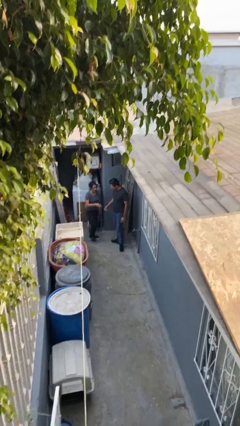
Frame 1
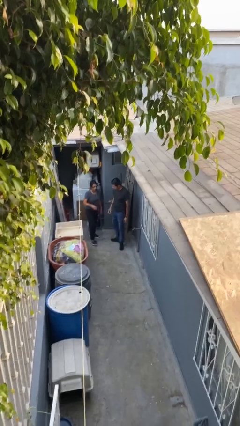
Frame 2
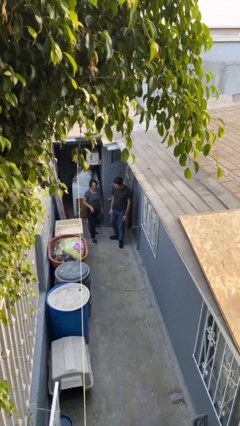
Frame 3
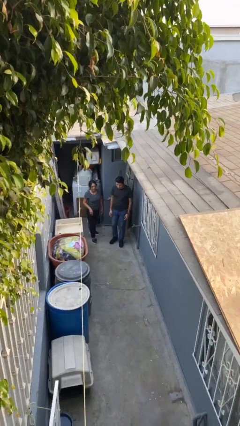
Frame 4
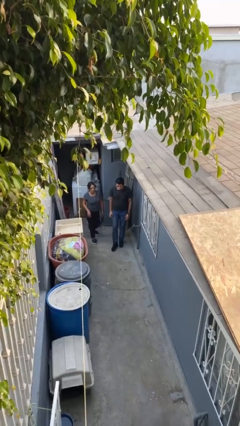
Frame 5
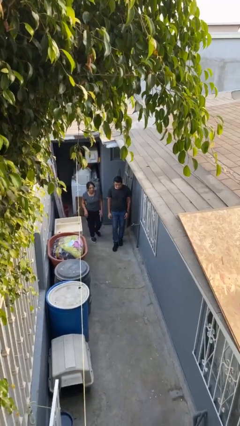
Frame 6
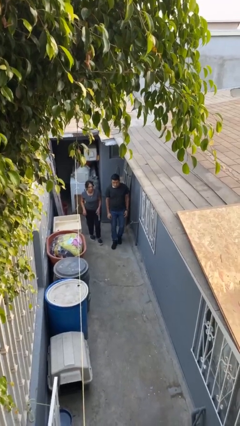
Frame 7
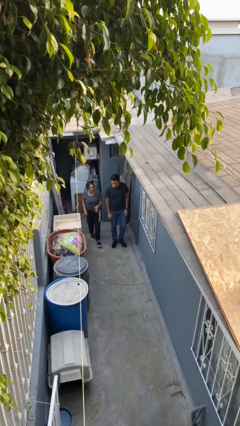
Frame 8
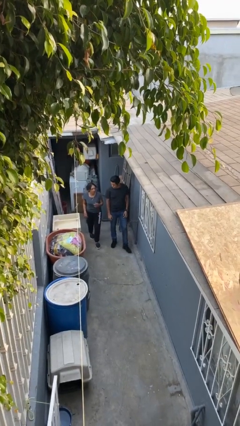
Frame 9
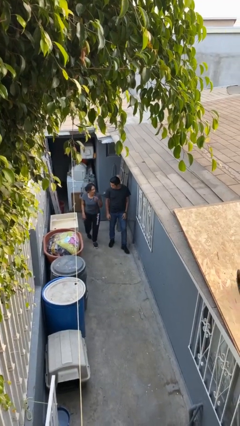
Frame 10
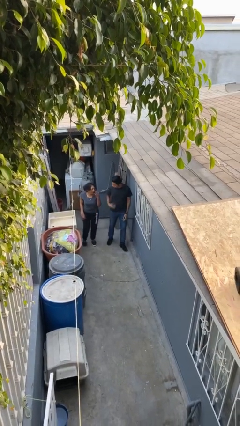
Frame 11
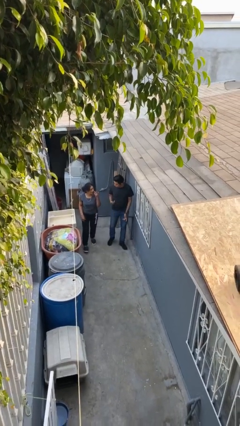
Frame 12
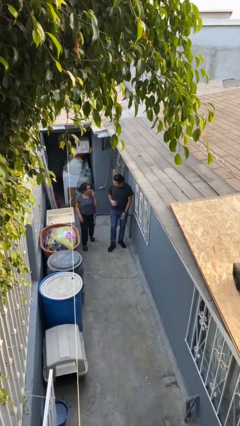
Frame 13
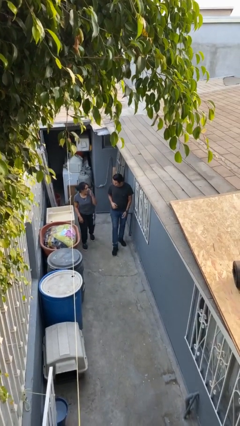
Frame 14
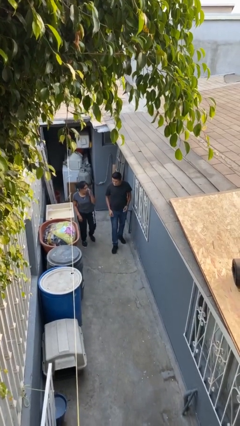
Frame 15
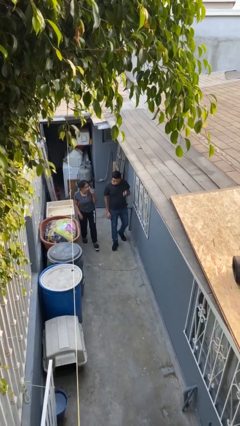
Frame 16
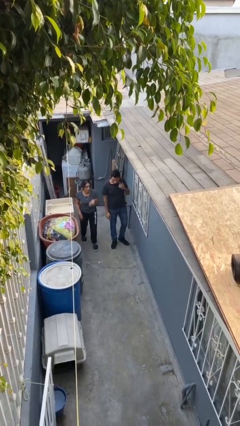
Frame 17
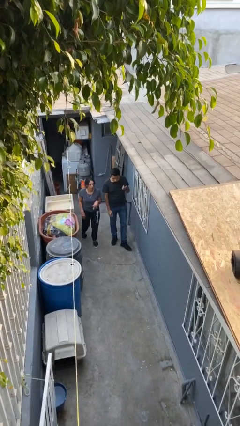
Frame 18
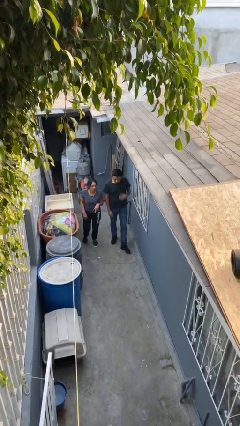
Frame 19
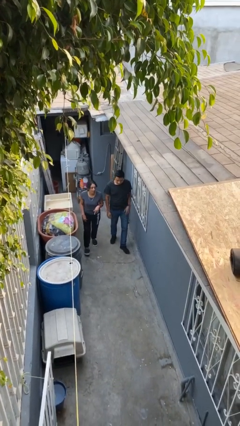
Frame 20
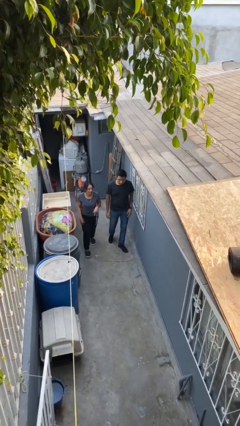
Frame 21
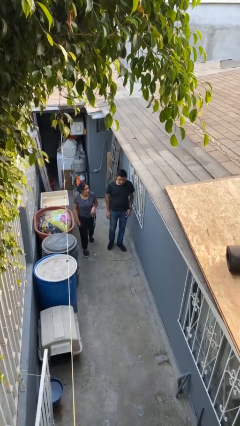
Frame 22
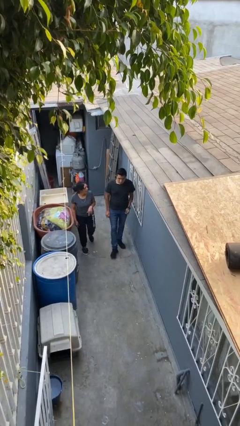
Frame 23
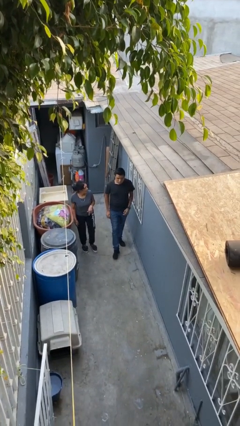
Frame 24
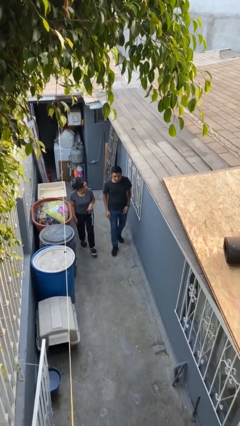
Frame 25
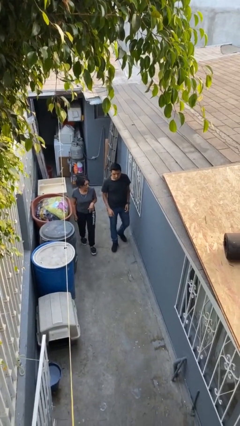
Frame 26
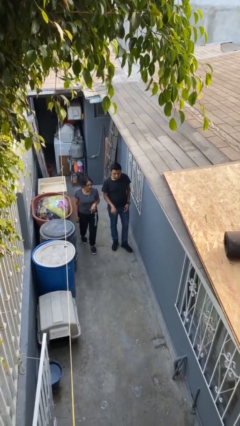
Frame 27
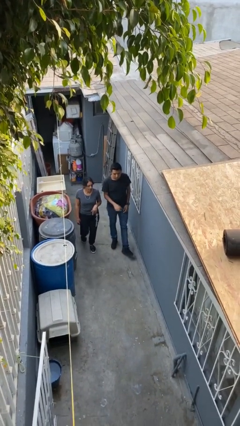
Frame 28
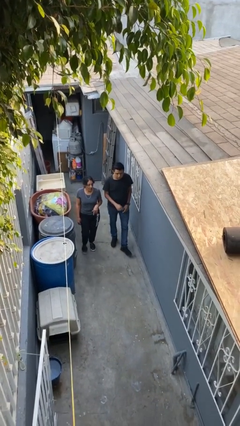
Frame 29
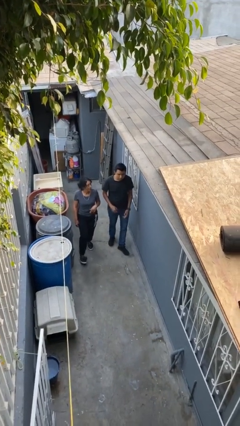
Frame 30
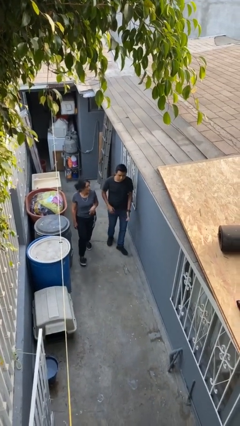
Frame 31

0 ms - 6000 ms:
person talks to person

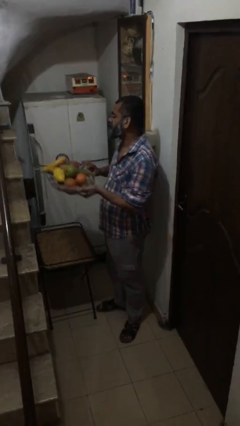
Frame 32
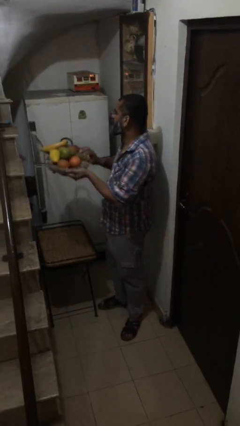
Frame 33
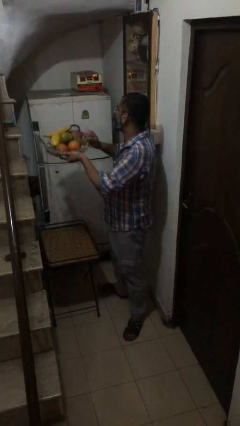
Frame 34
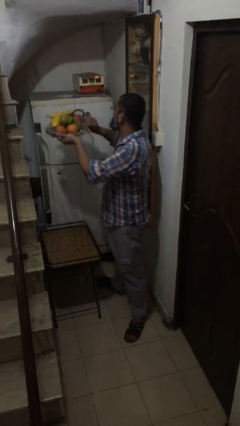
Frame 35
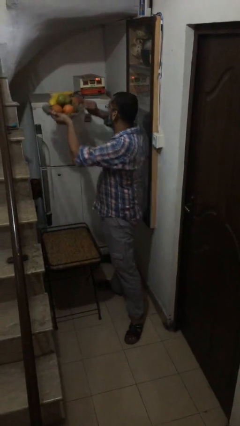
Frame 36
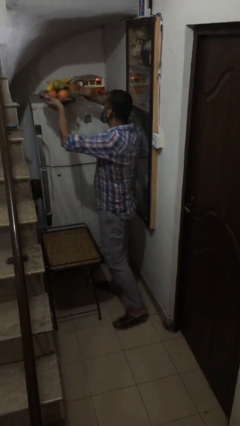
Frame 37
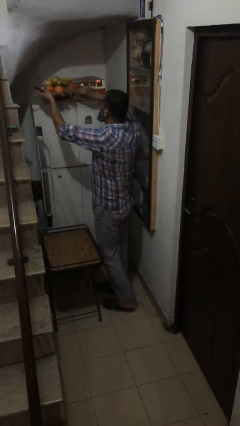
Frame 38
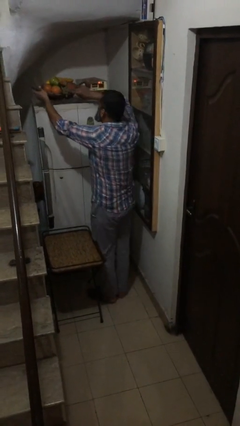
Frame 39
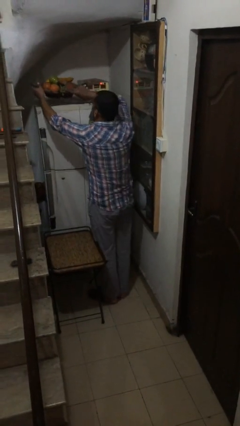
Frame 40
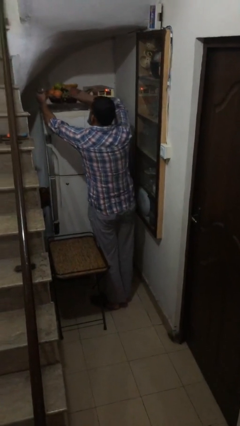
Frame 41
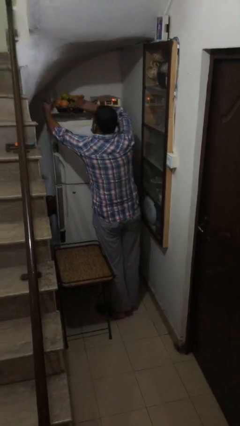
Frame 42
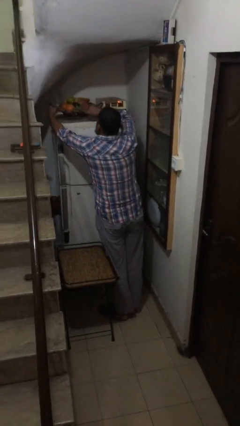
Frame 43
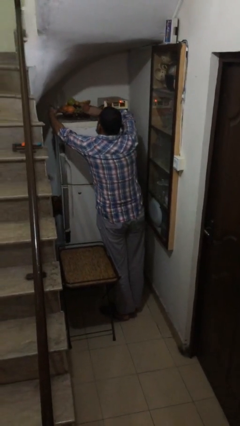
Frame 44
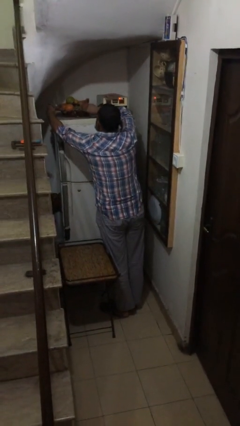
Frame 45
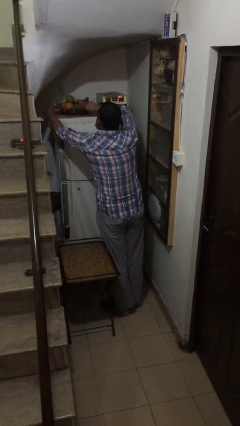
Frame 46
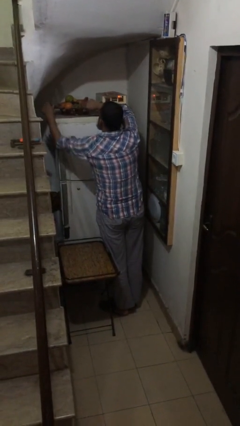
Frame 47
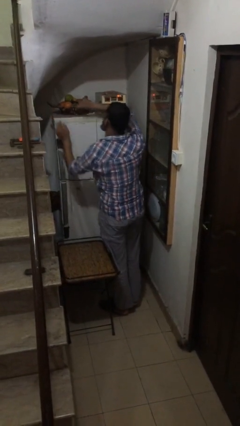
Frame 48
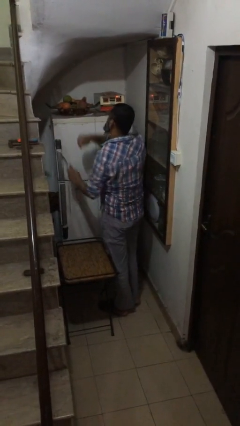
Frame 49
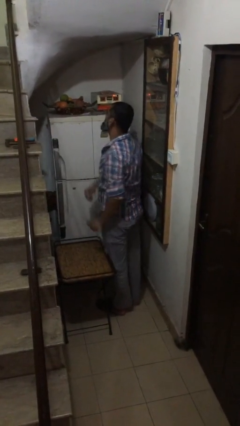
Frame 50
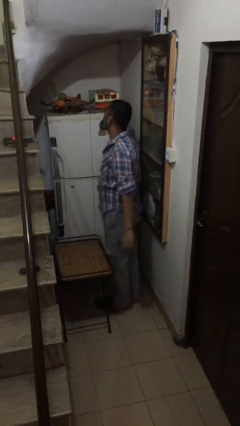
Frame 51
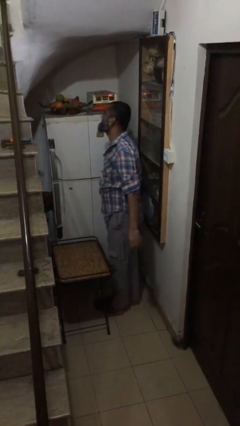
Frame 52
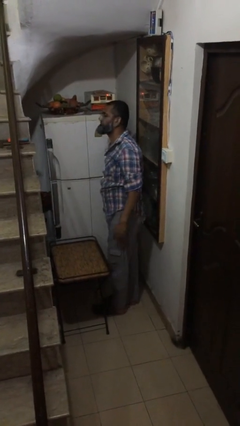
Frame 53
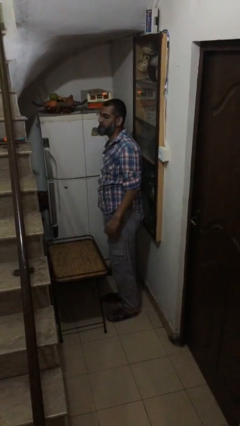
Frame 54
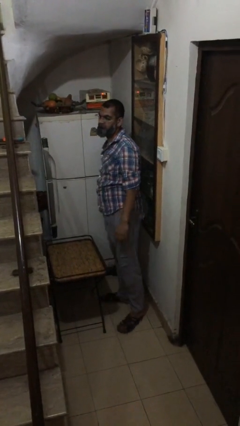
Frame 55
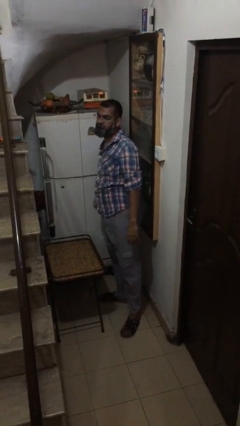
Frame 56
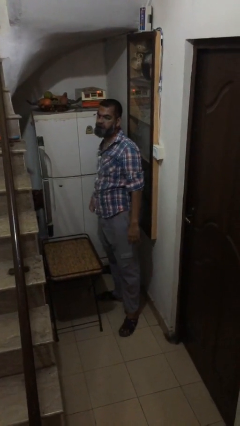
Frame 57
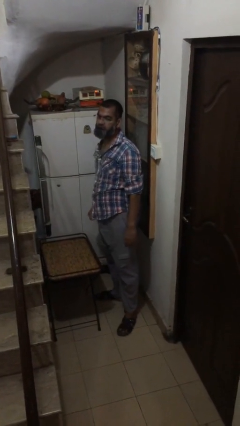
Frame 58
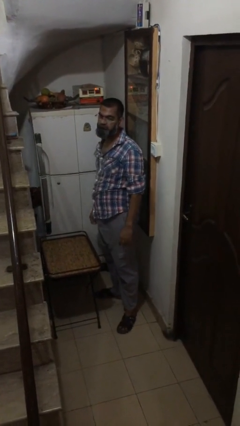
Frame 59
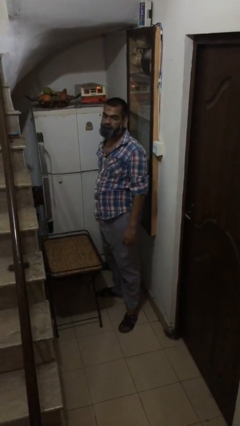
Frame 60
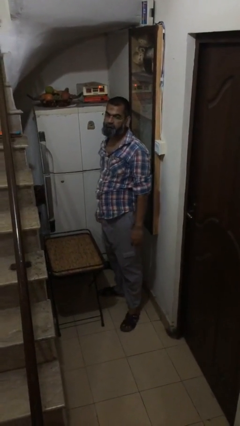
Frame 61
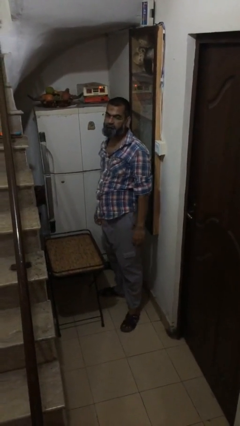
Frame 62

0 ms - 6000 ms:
person puts down object on shelf

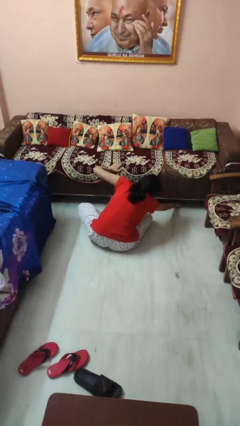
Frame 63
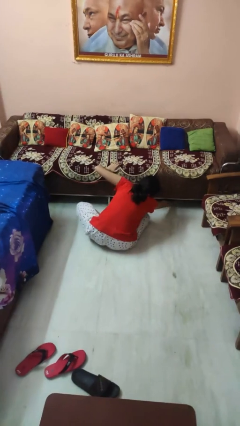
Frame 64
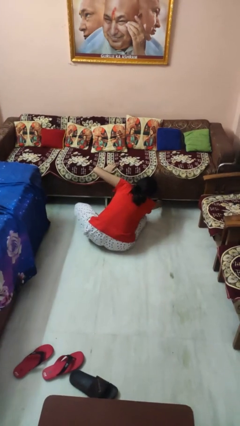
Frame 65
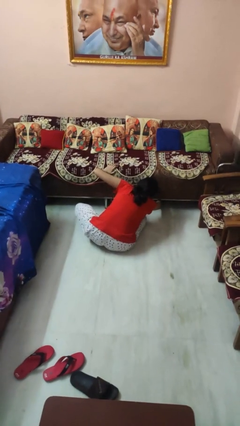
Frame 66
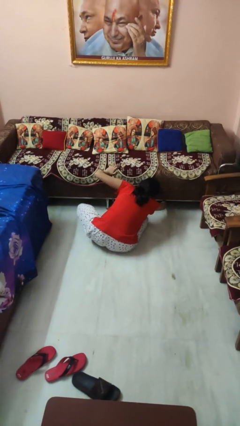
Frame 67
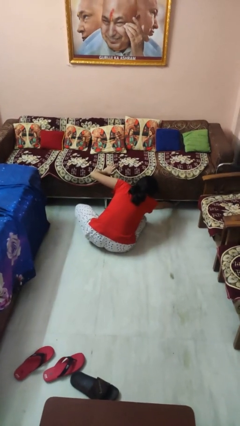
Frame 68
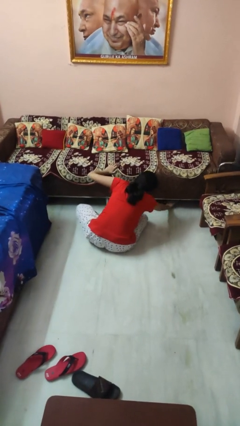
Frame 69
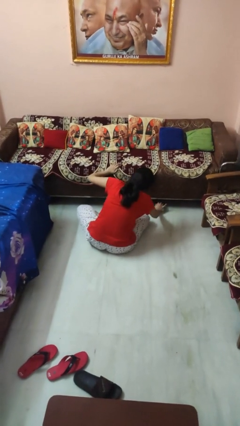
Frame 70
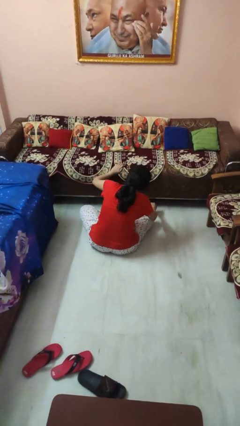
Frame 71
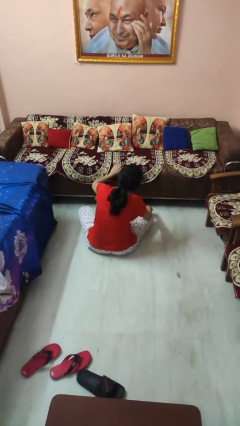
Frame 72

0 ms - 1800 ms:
person searches under couch

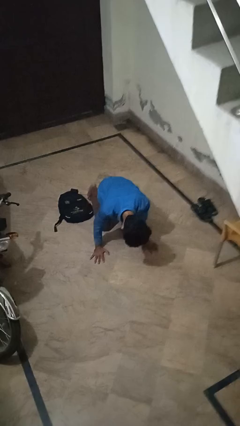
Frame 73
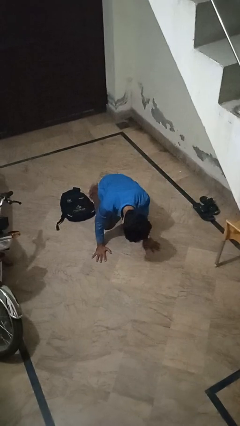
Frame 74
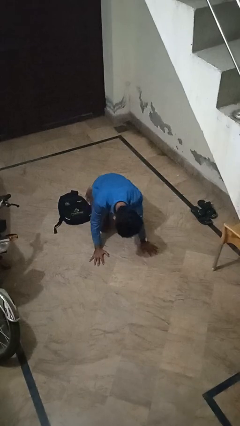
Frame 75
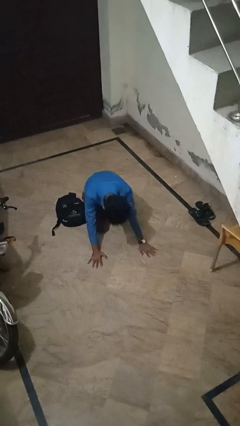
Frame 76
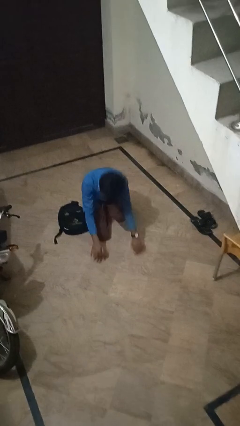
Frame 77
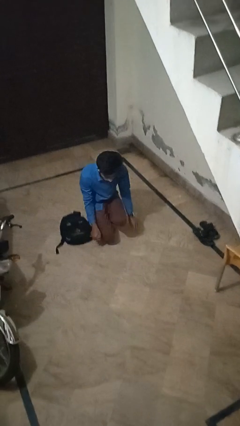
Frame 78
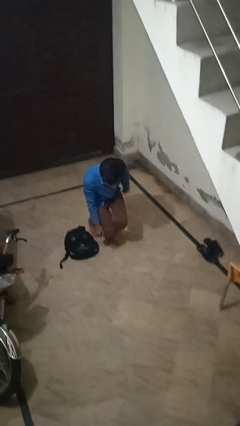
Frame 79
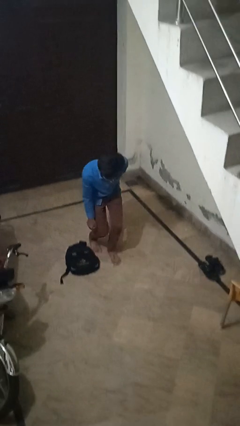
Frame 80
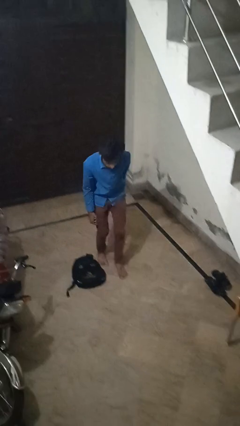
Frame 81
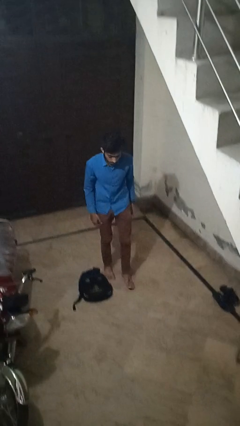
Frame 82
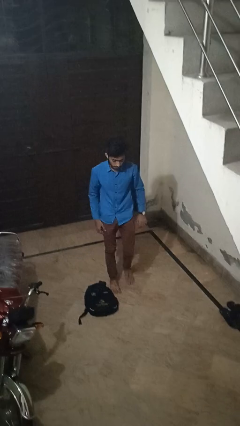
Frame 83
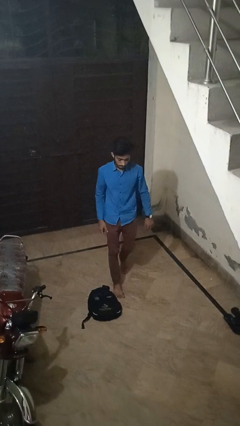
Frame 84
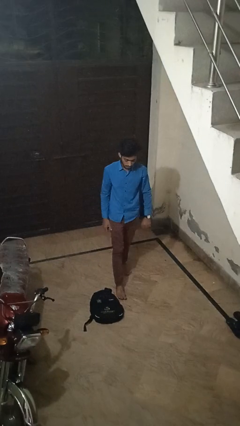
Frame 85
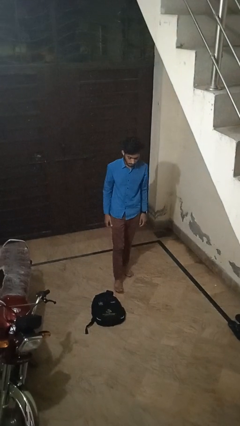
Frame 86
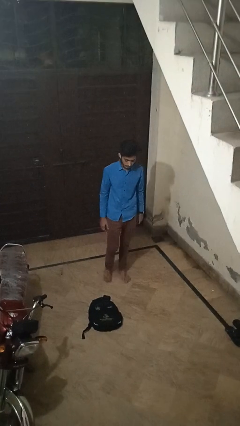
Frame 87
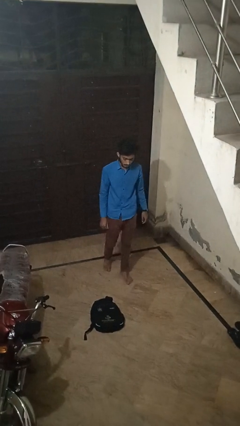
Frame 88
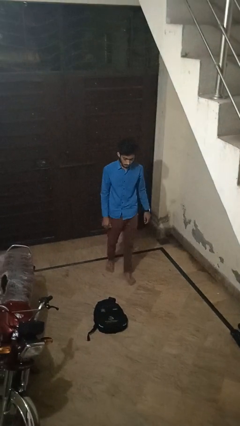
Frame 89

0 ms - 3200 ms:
person stands up from floor

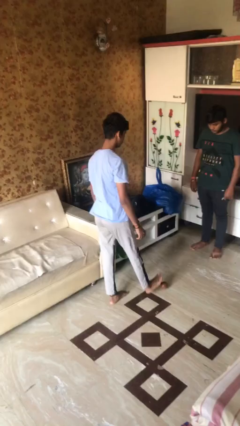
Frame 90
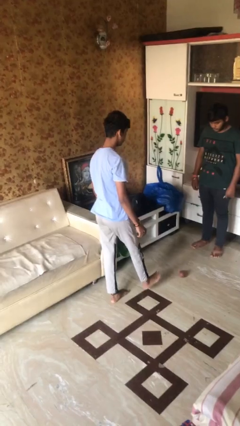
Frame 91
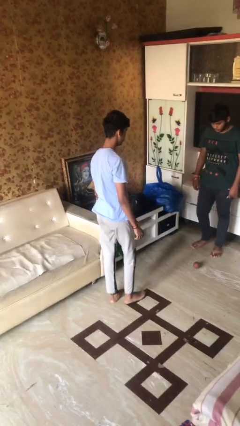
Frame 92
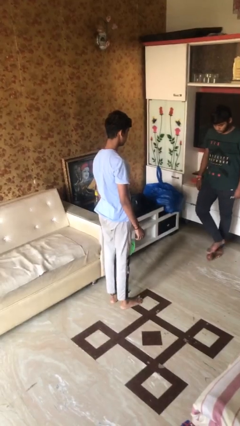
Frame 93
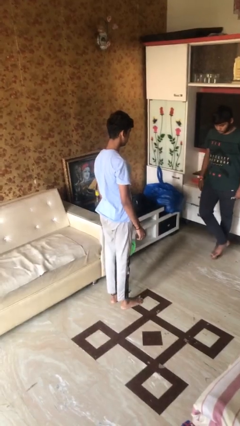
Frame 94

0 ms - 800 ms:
person kicks object to person
